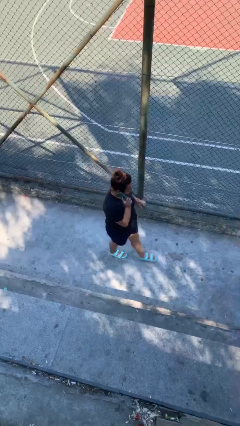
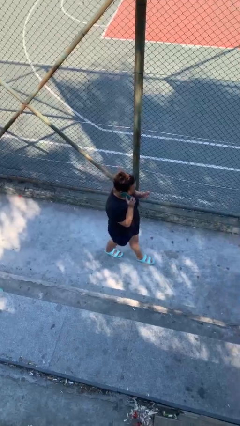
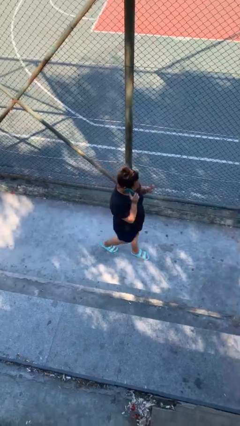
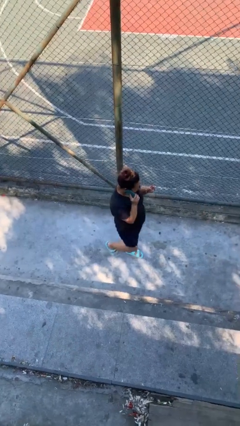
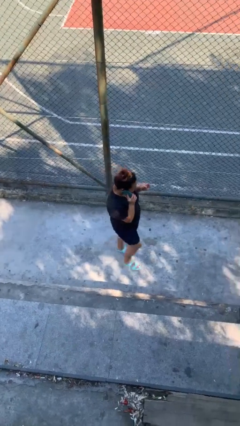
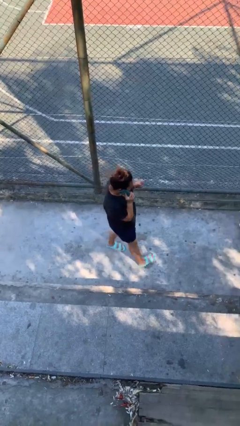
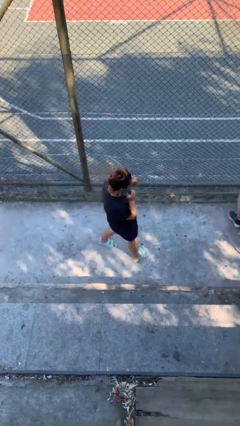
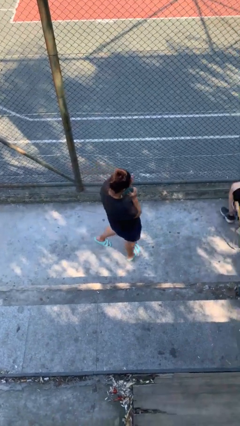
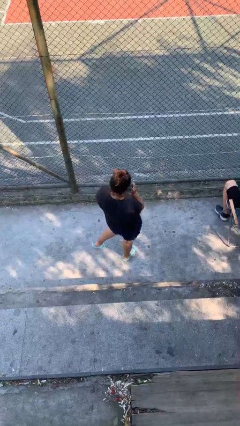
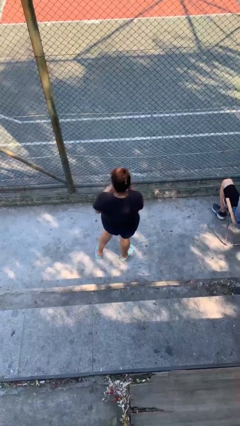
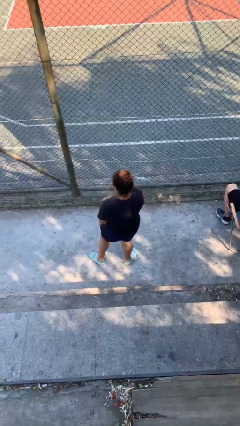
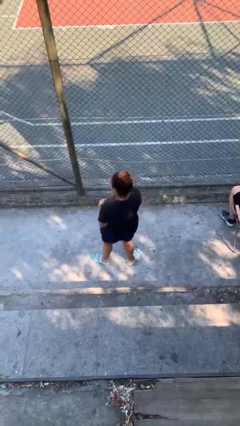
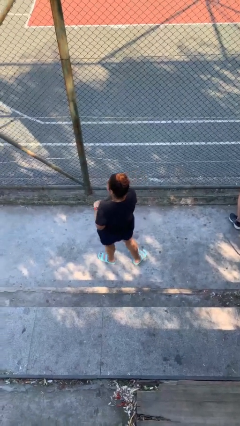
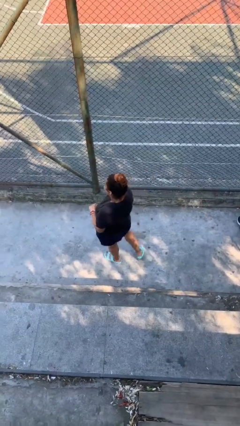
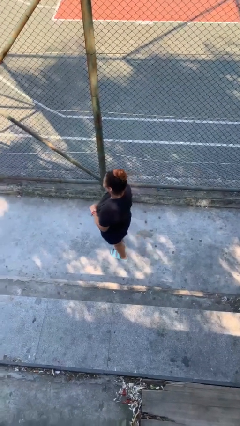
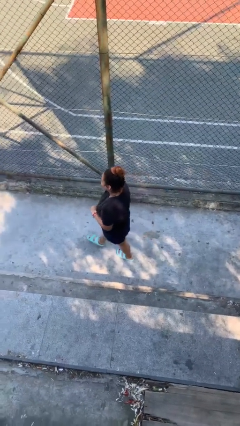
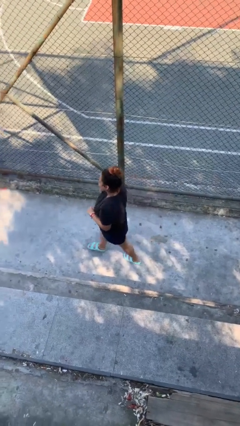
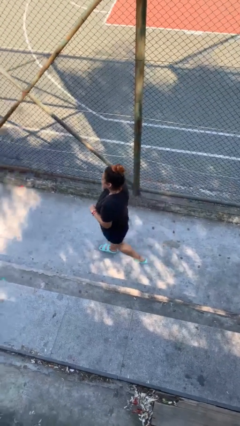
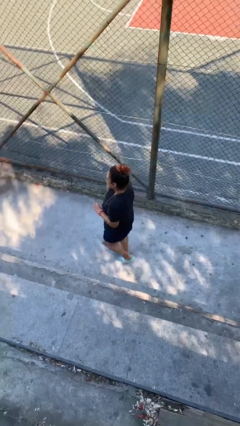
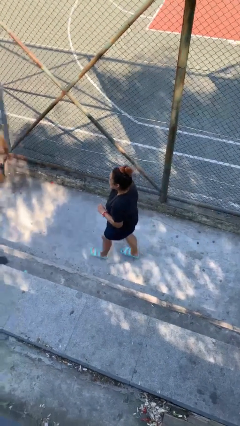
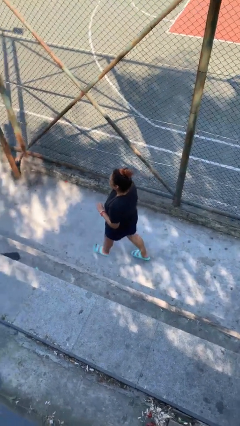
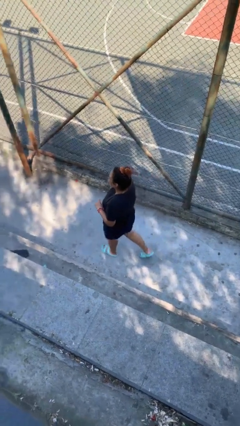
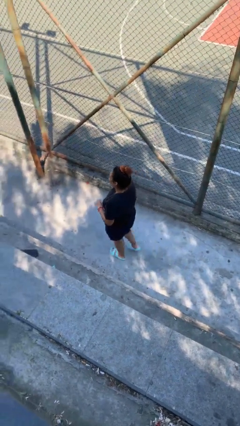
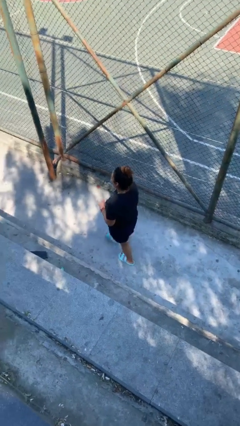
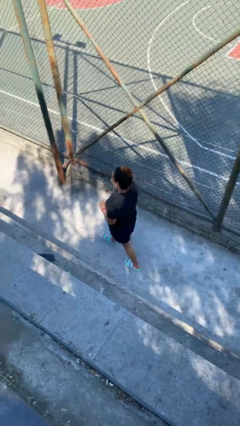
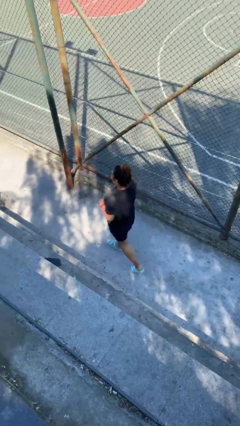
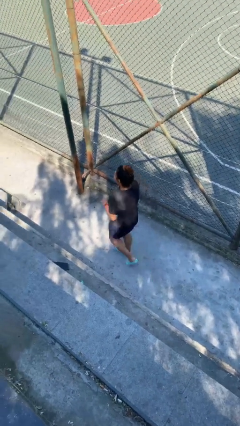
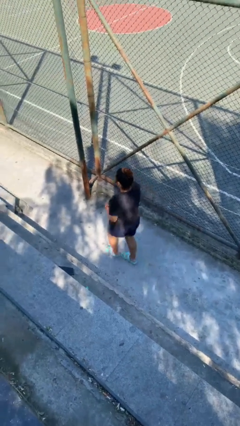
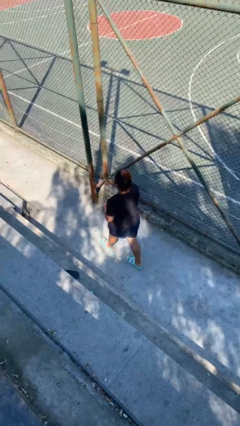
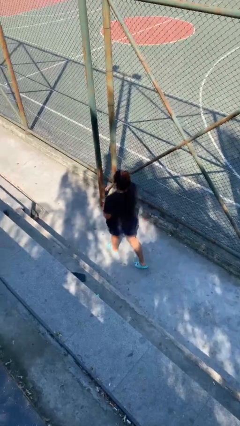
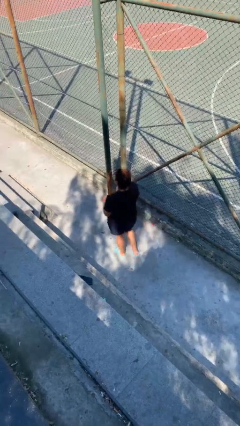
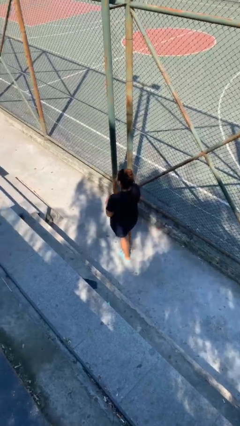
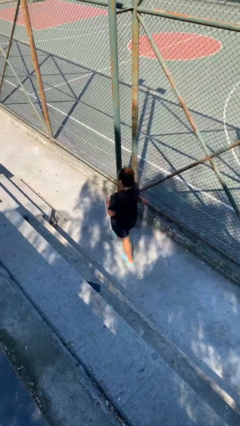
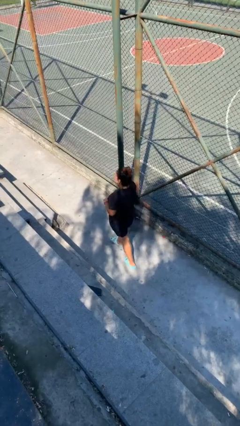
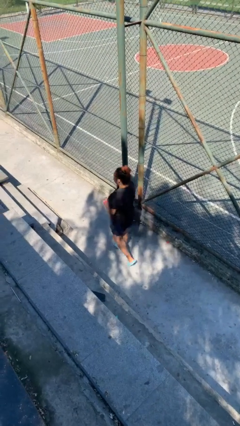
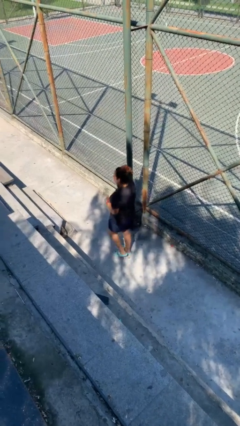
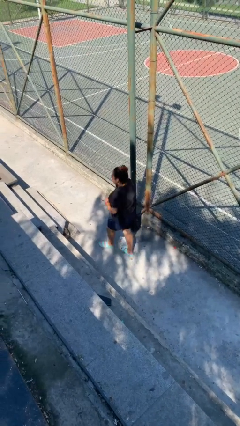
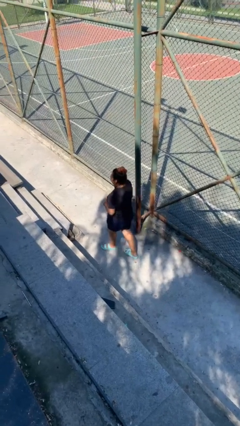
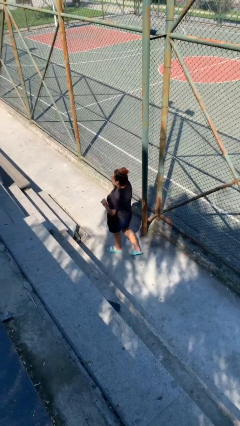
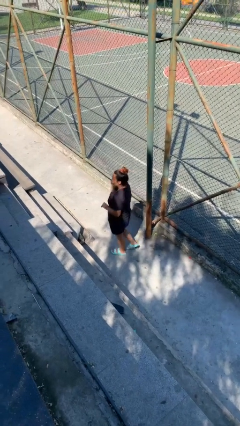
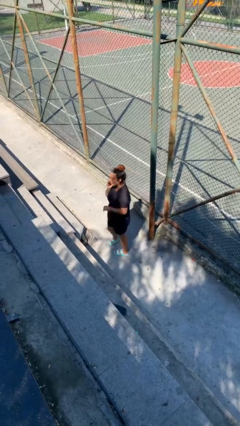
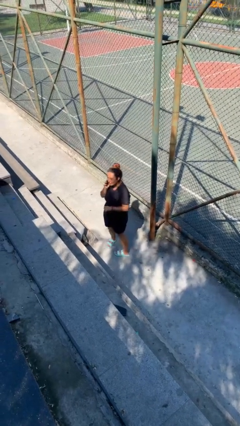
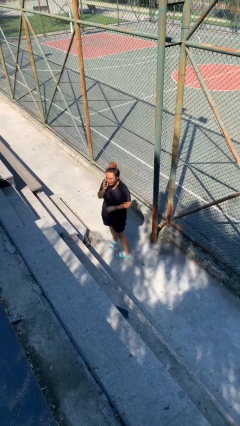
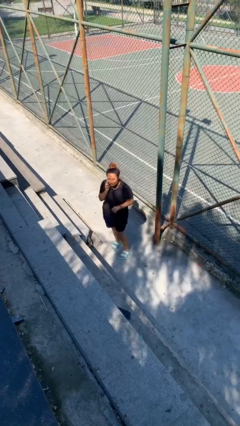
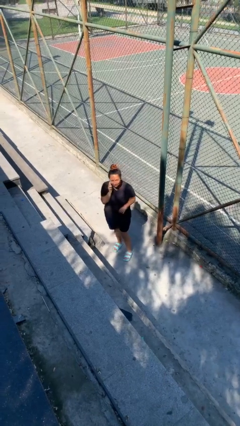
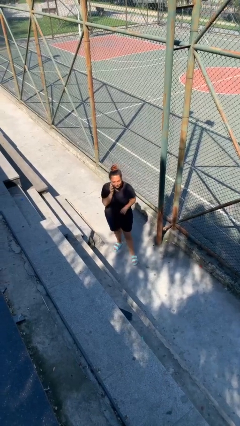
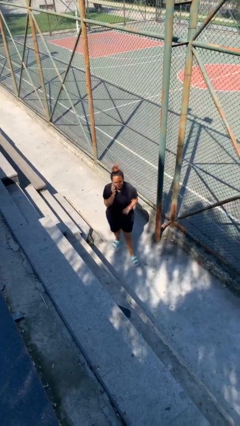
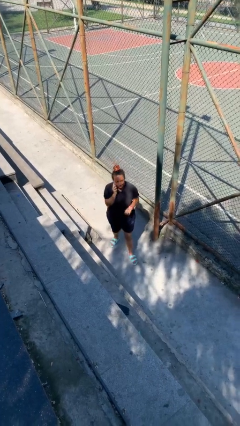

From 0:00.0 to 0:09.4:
person talks on phone

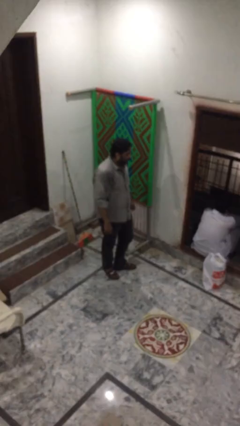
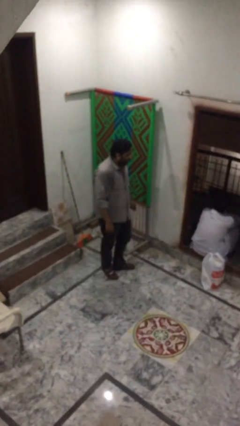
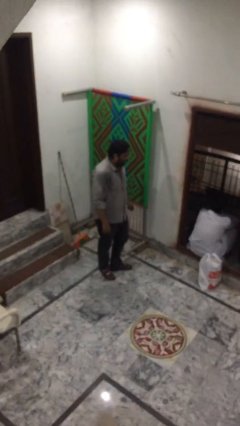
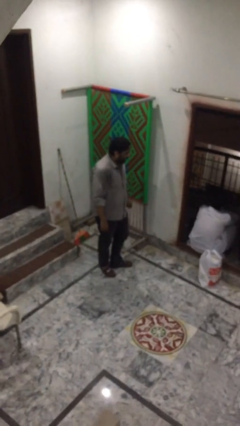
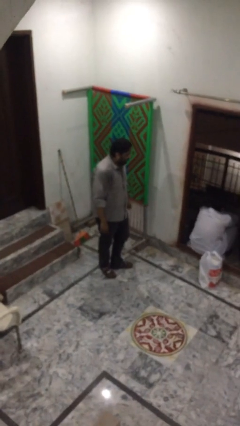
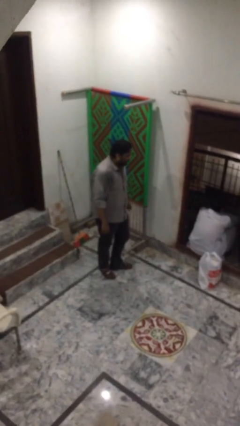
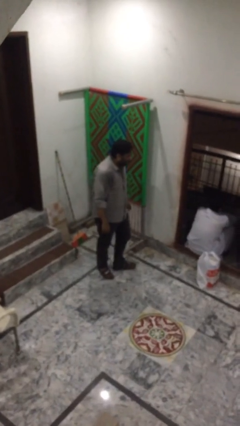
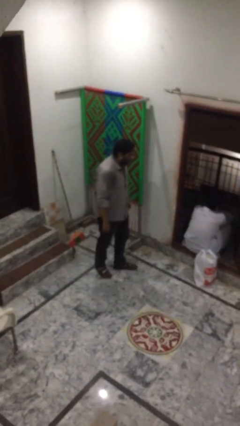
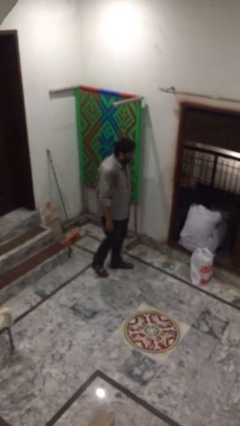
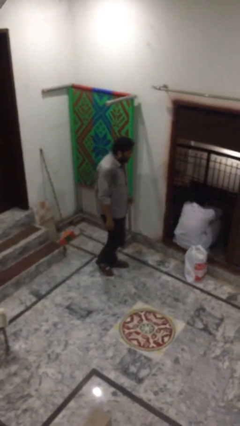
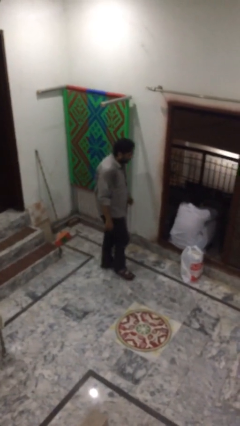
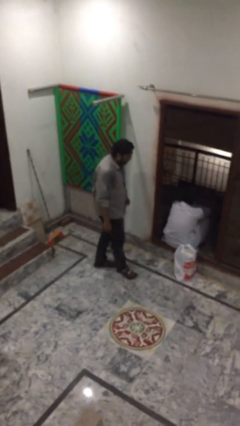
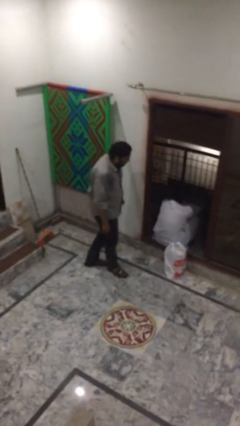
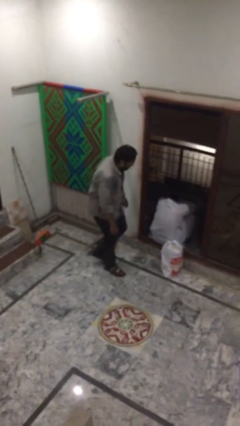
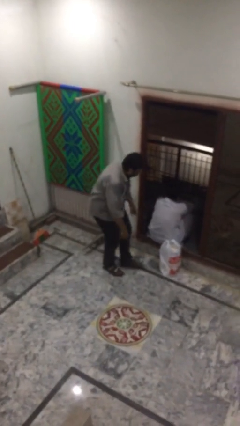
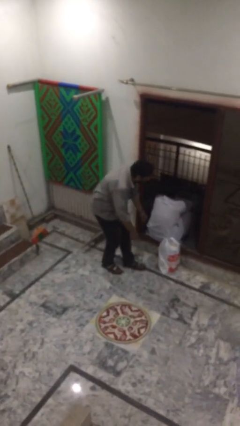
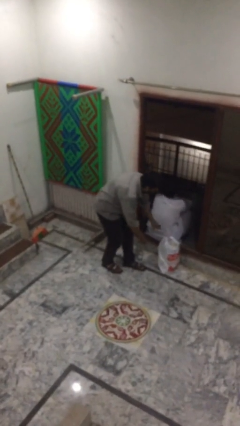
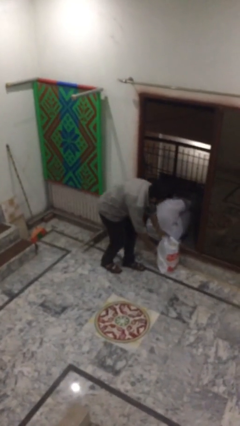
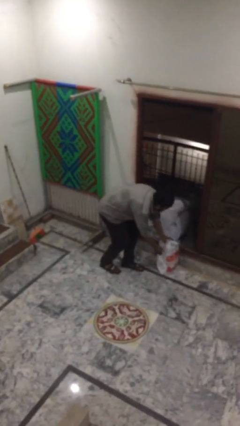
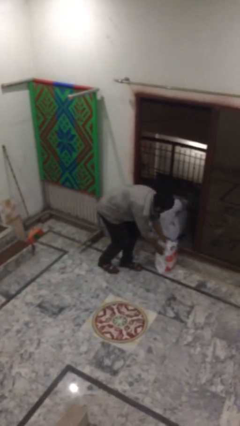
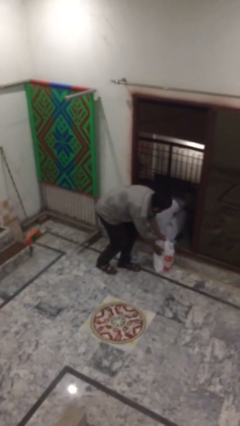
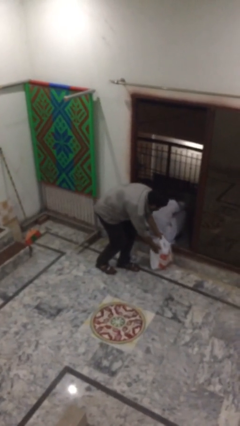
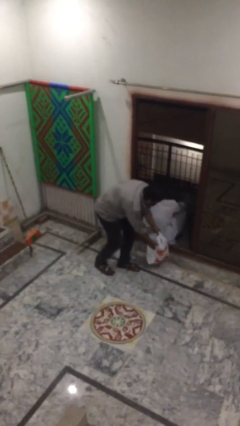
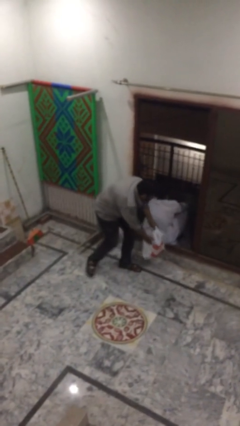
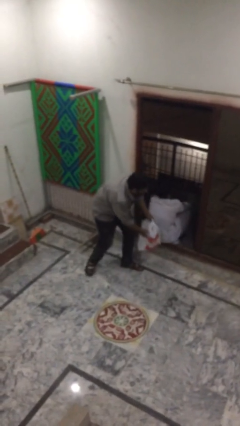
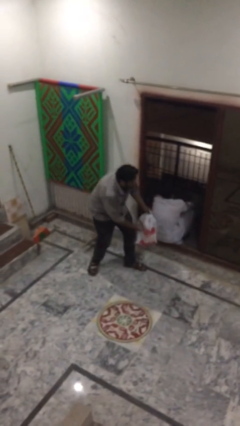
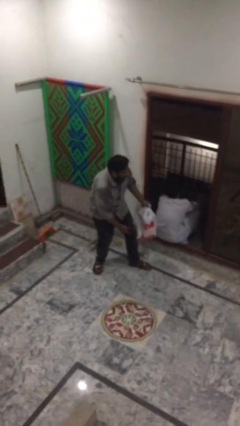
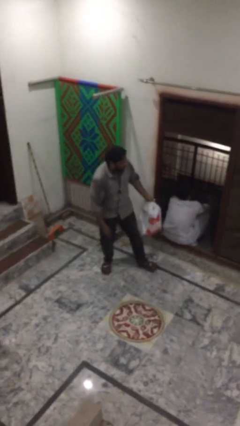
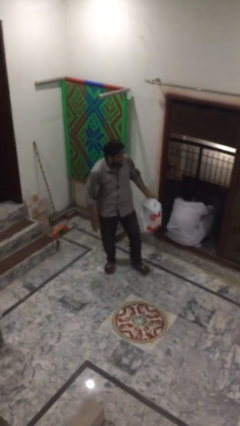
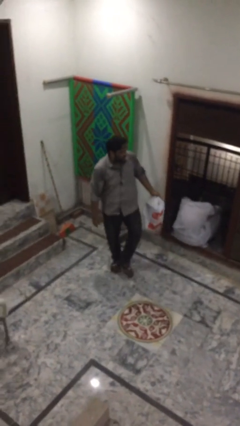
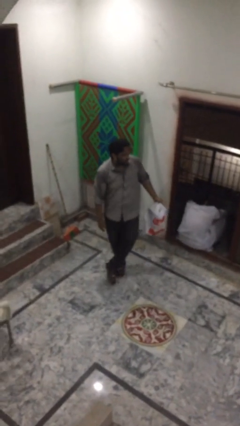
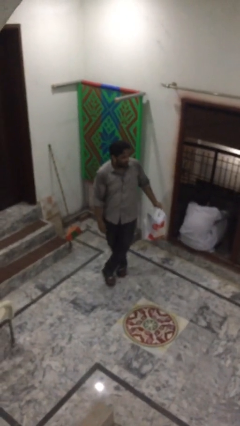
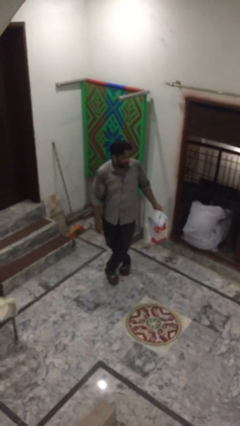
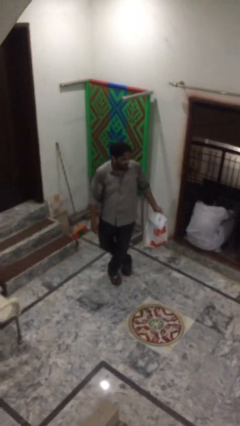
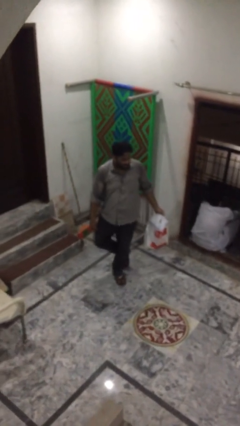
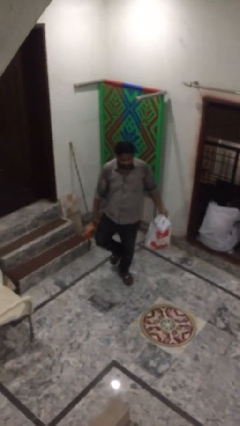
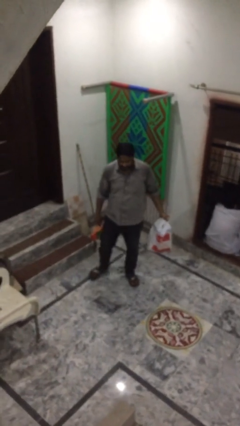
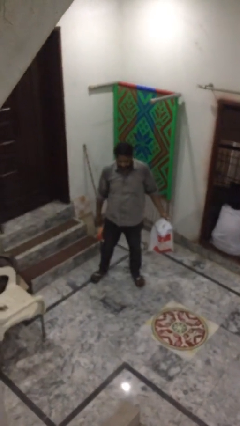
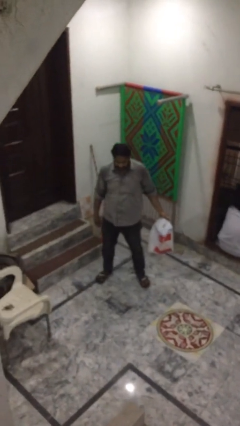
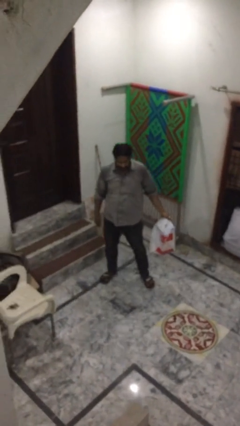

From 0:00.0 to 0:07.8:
person steals object from person

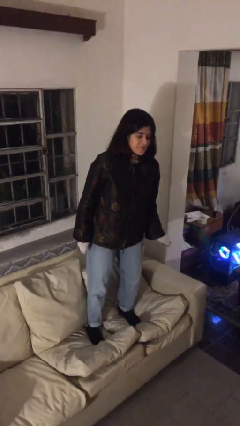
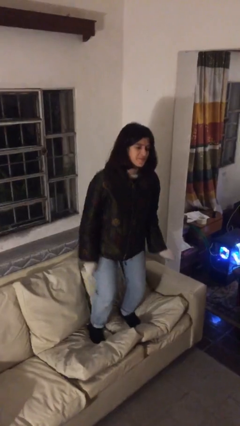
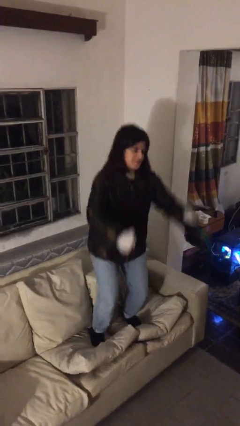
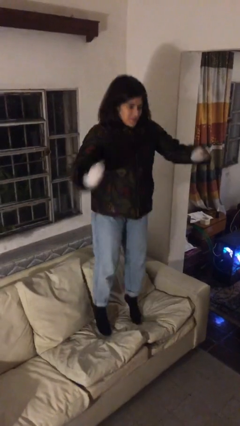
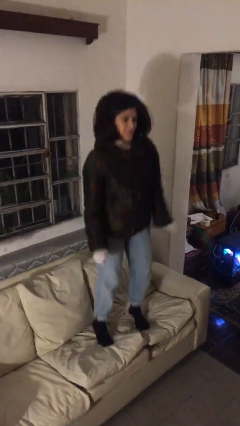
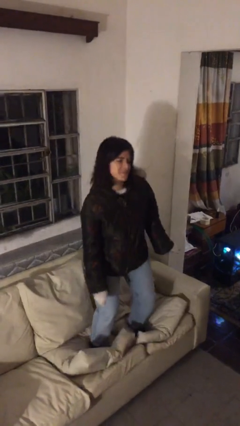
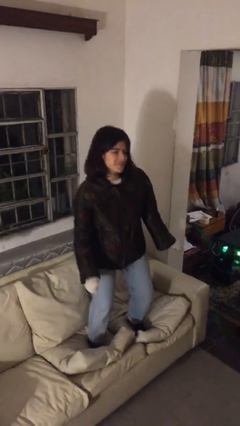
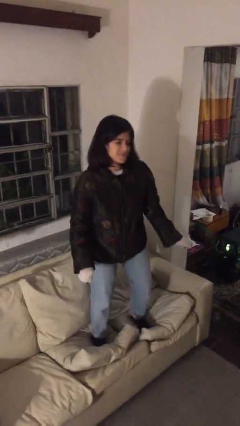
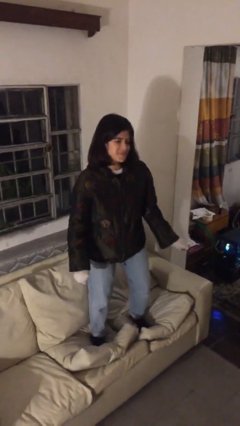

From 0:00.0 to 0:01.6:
person jumps on couch
